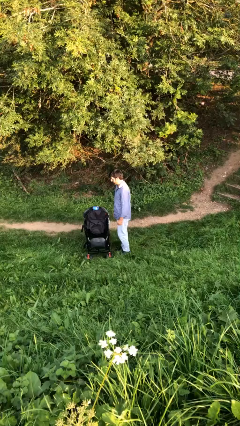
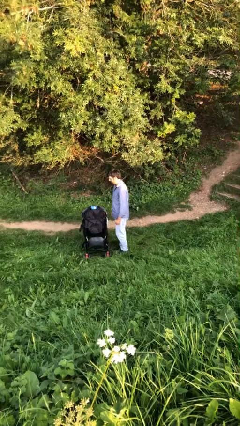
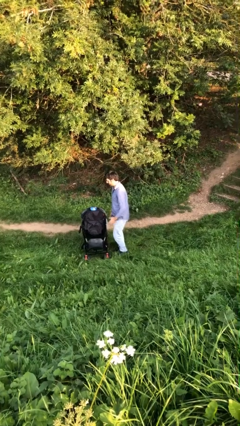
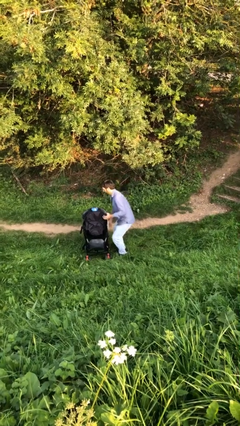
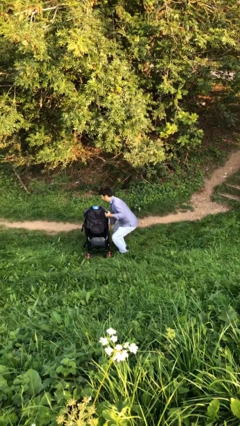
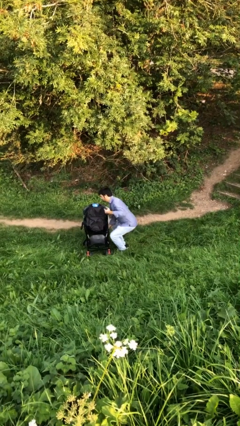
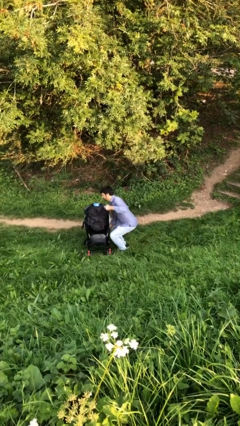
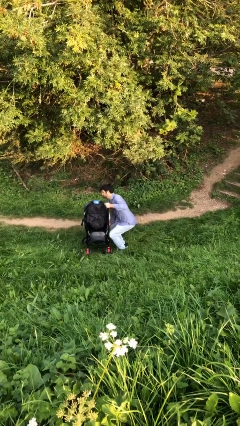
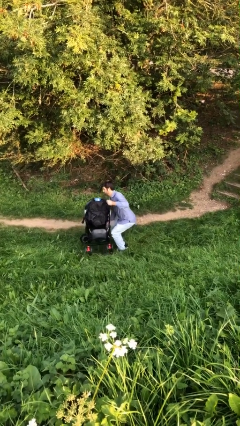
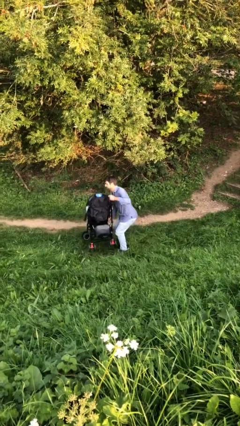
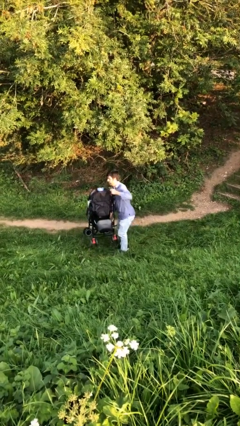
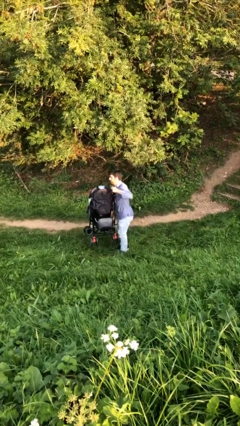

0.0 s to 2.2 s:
person picks up object from floor

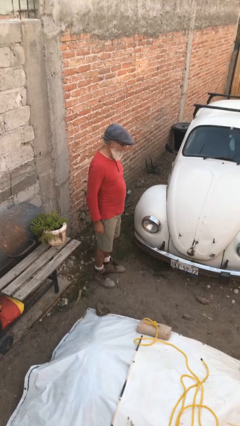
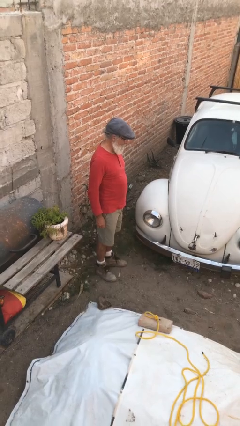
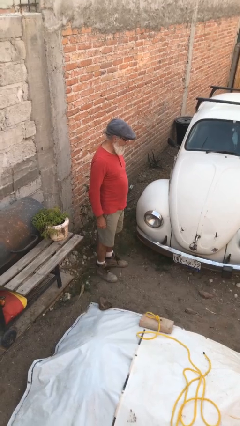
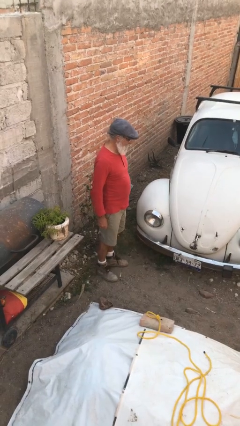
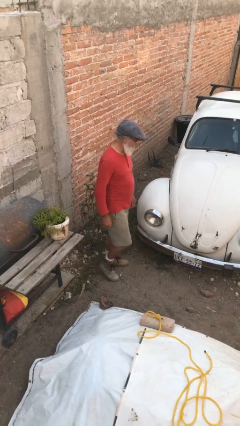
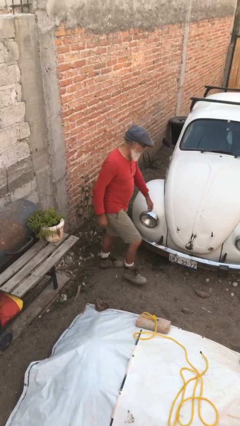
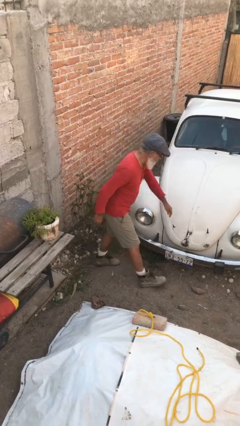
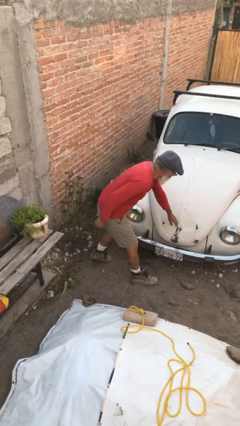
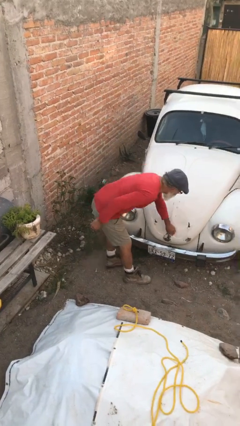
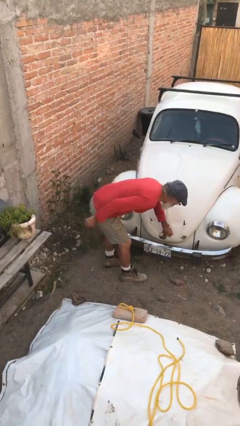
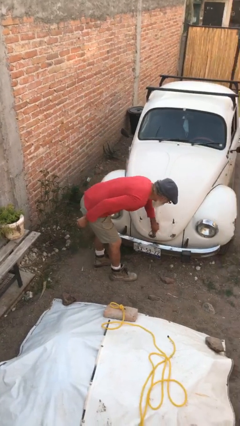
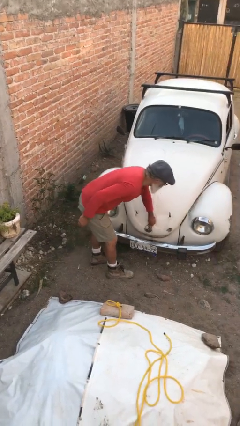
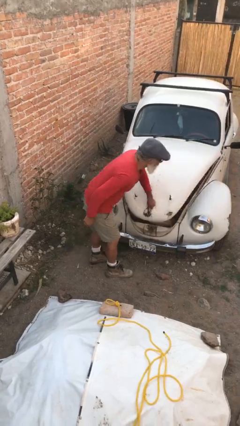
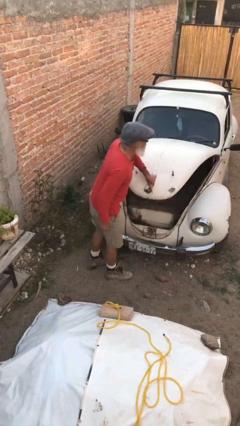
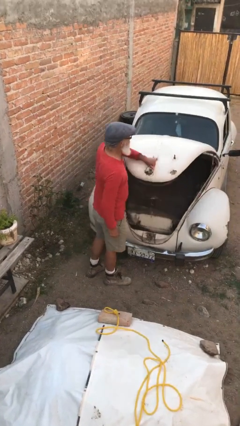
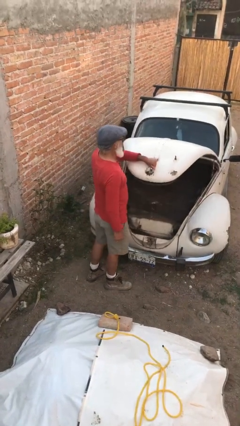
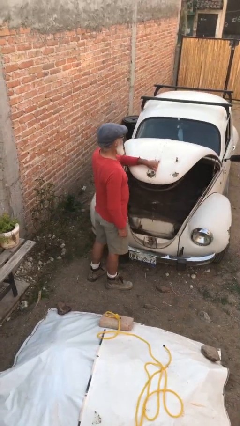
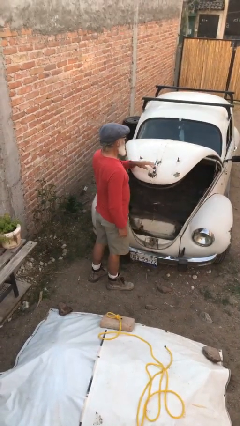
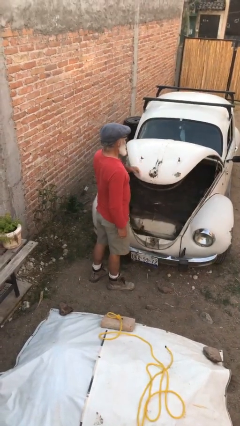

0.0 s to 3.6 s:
person opens car trunk

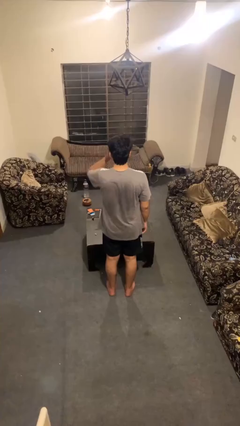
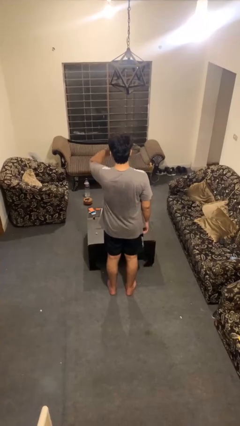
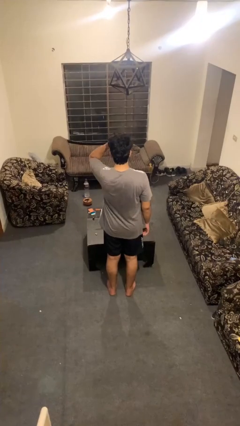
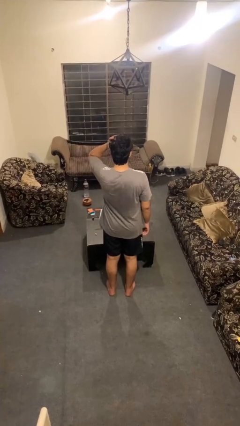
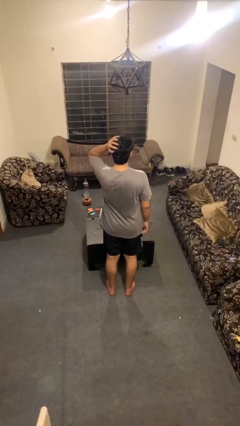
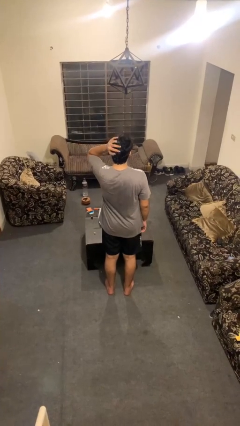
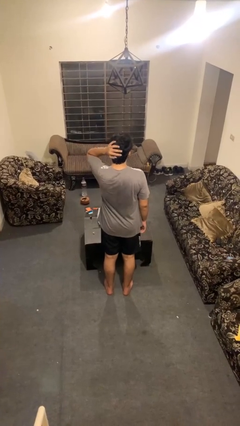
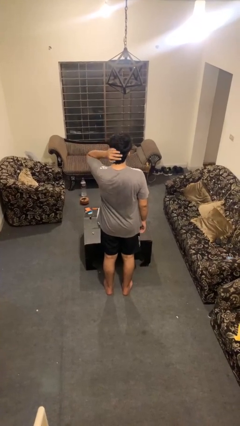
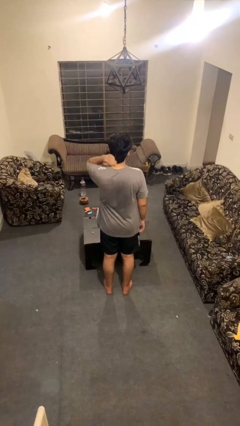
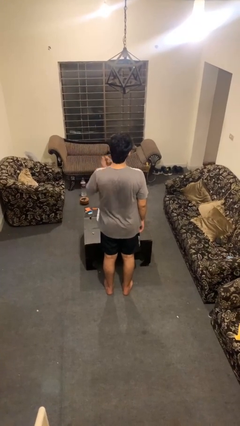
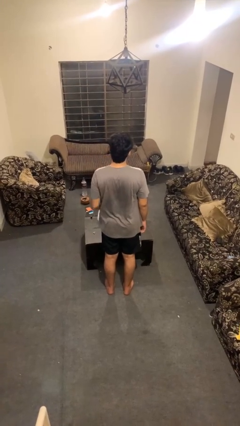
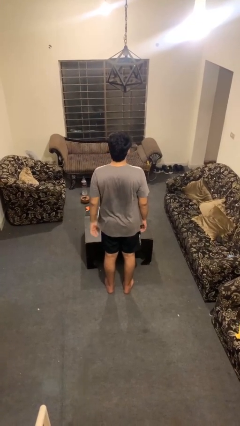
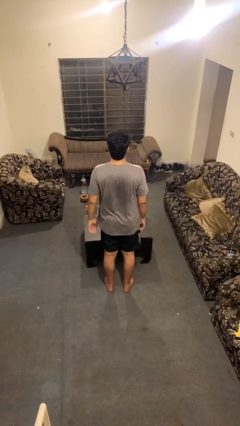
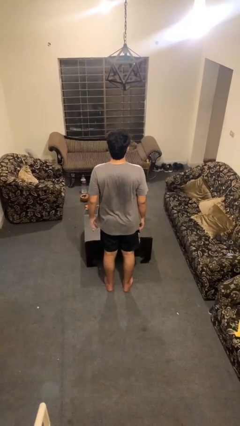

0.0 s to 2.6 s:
person strokes hair

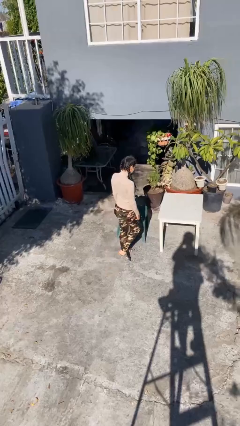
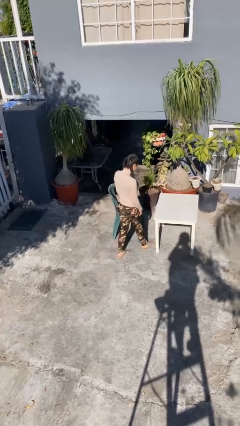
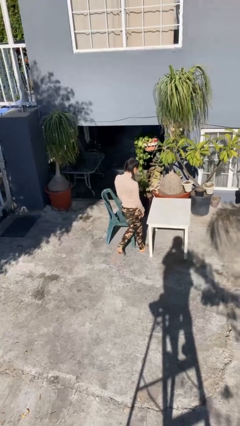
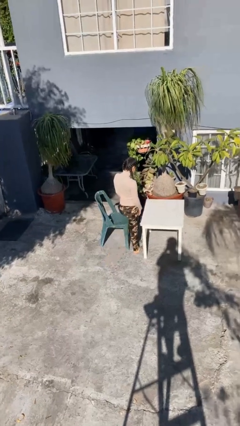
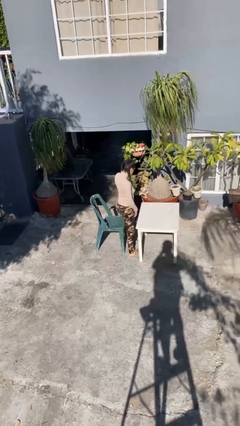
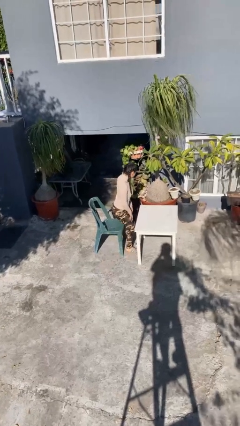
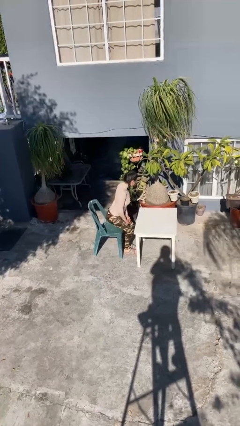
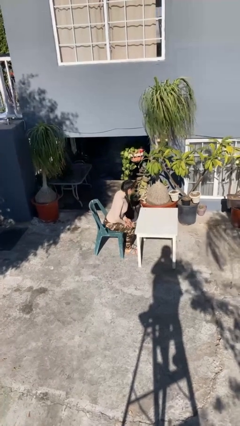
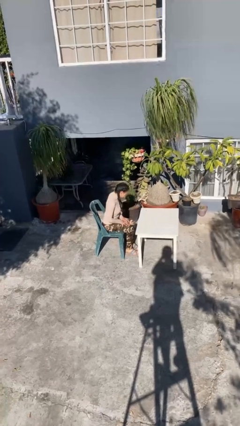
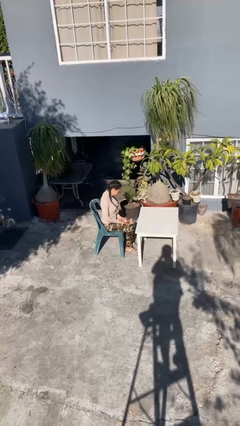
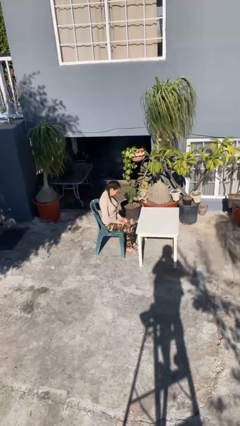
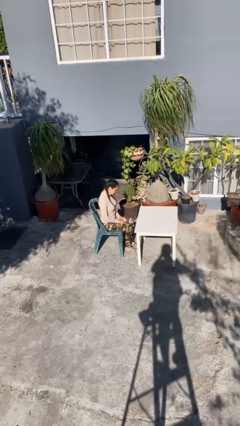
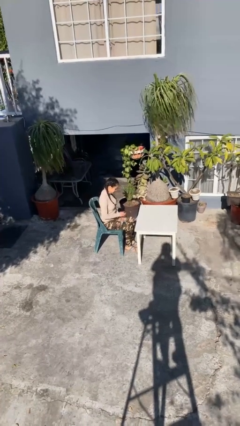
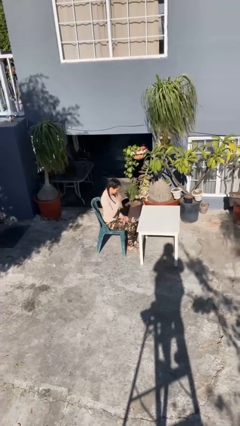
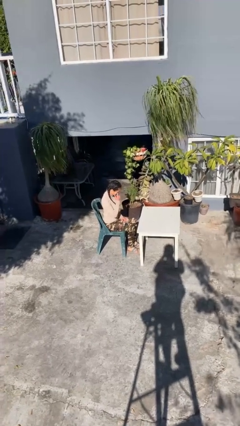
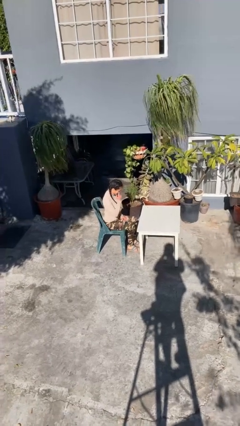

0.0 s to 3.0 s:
person sits down

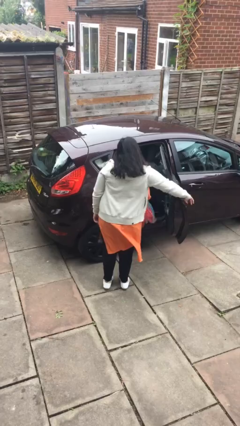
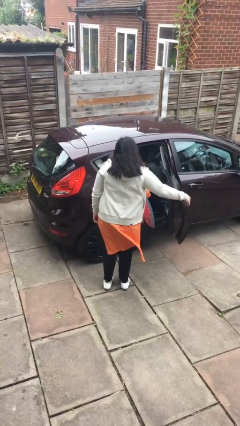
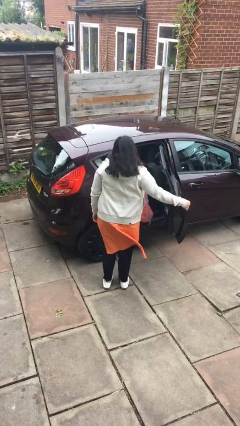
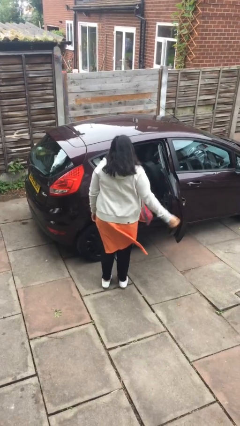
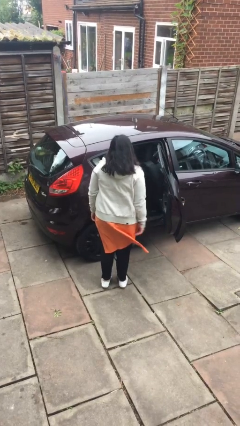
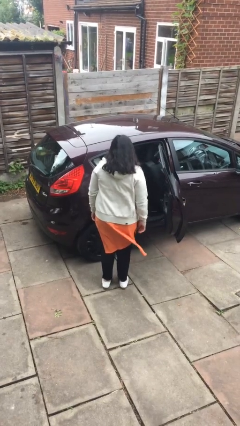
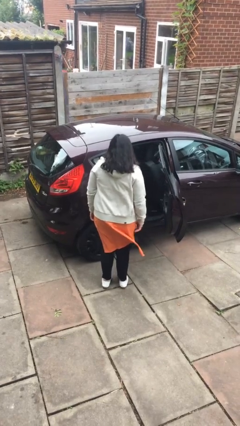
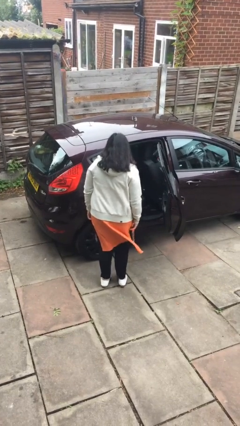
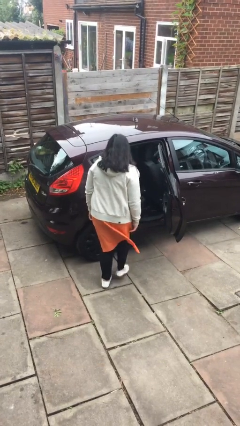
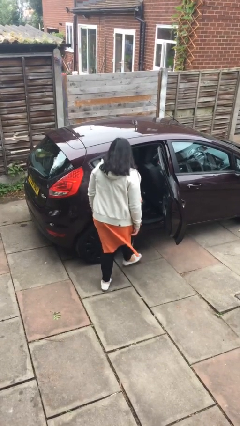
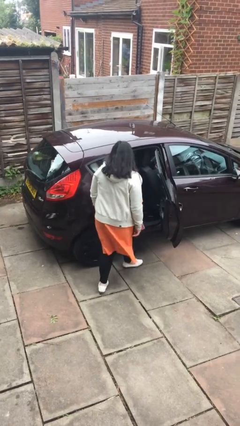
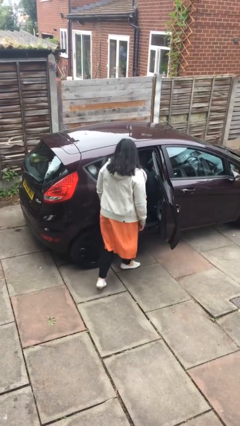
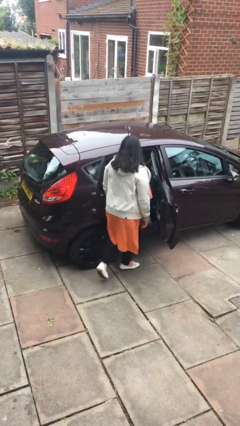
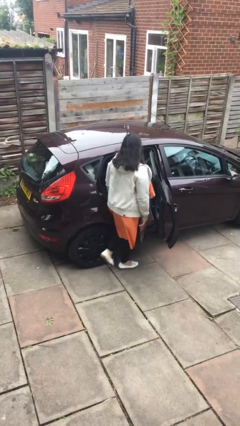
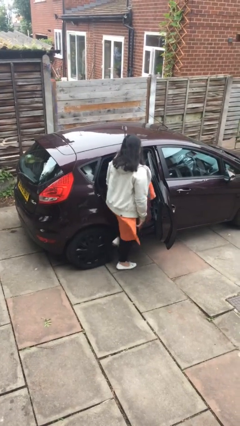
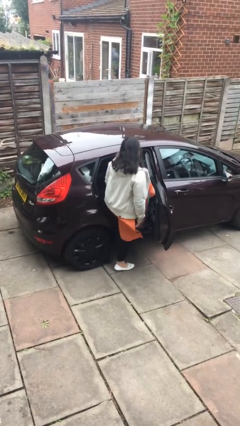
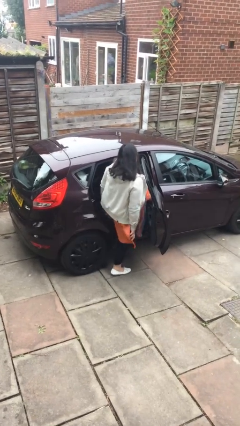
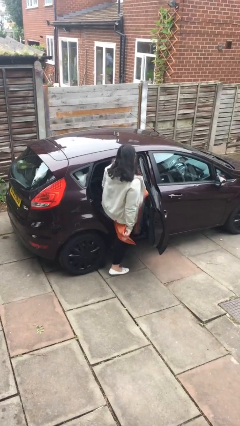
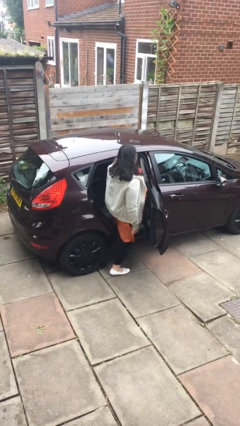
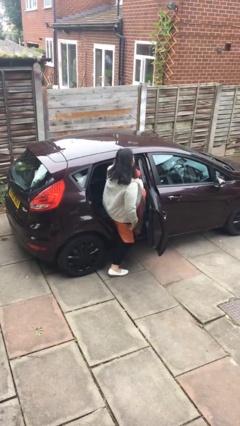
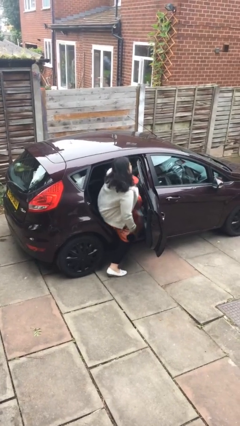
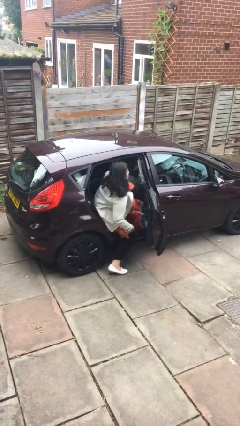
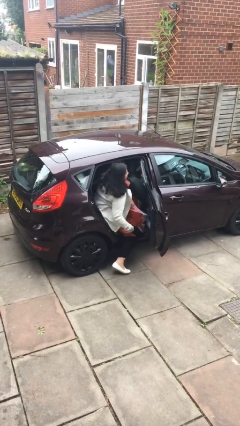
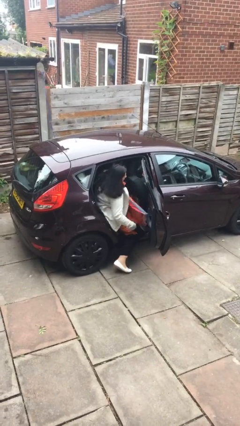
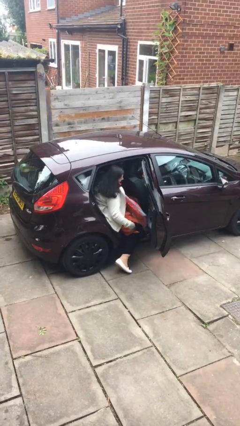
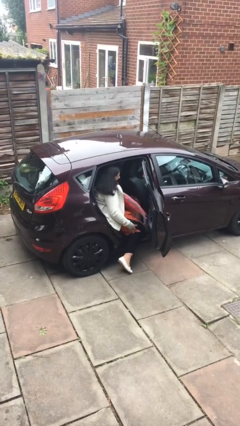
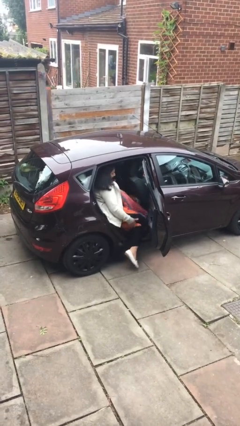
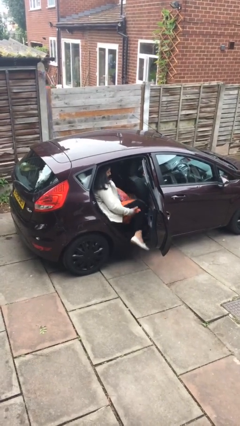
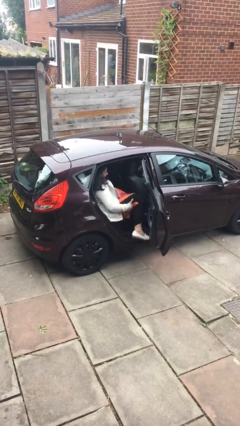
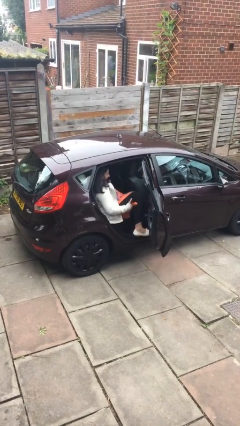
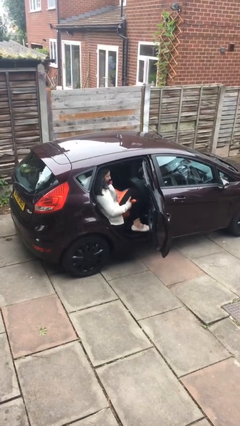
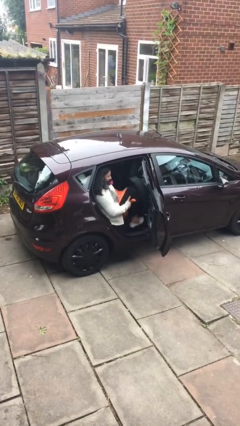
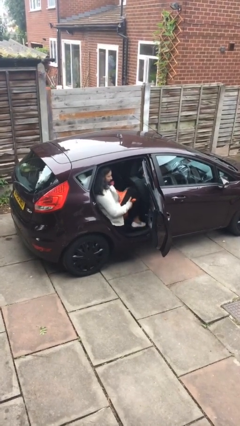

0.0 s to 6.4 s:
person enters car
